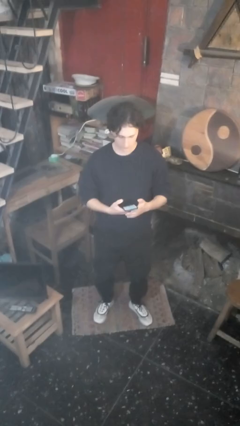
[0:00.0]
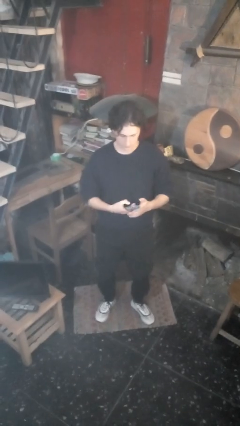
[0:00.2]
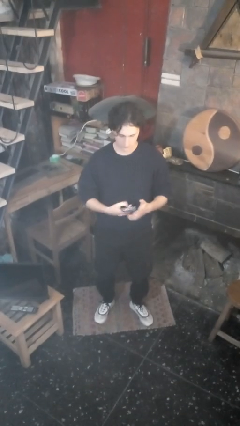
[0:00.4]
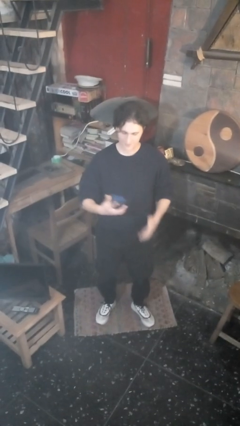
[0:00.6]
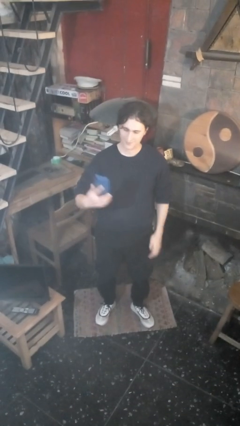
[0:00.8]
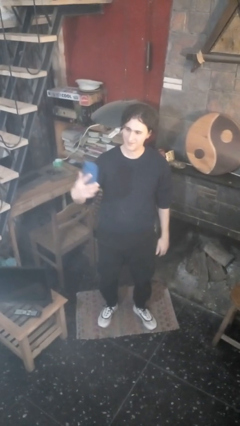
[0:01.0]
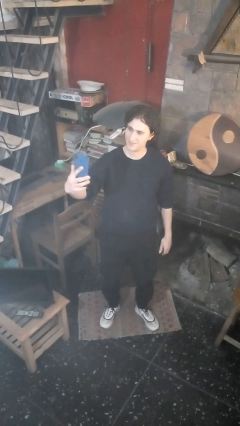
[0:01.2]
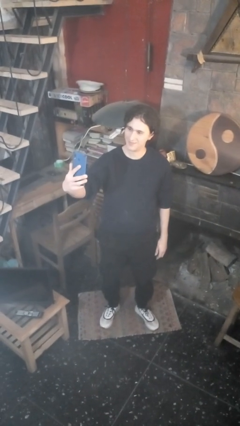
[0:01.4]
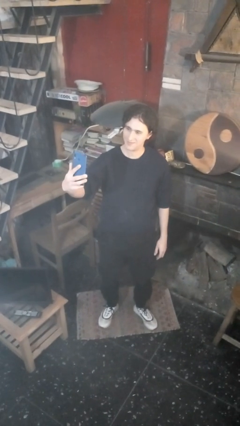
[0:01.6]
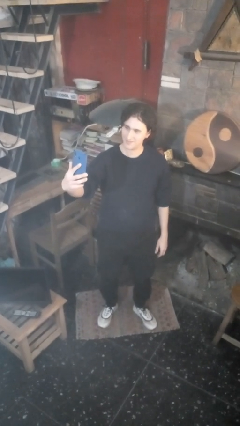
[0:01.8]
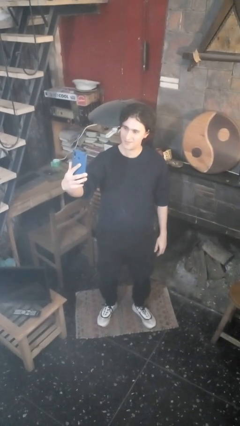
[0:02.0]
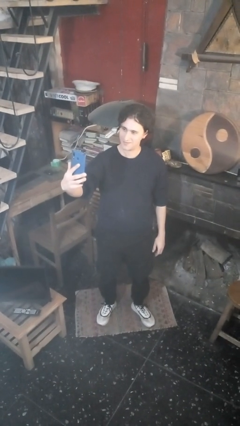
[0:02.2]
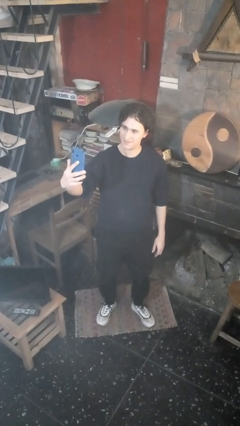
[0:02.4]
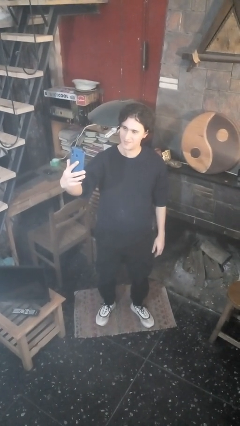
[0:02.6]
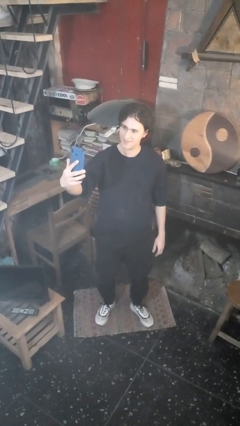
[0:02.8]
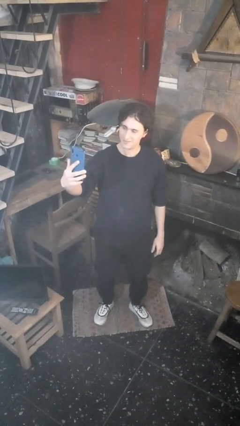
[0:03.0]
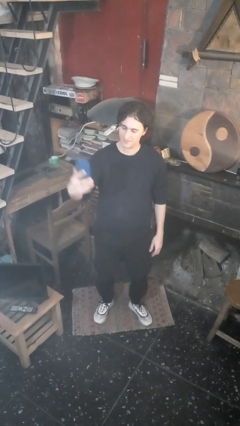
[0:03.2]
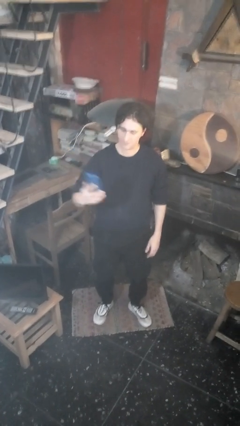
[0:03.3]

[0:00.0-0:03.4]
person takes selfie

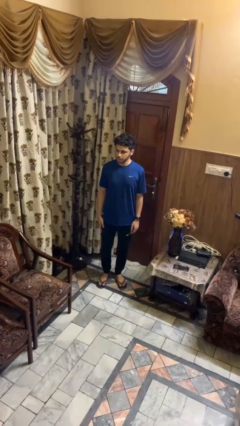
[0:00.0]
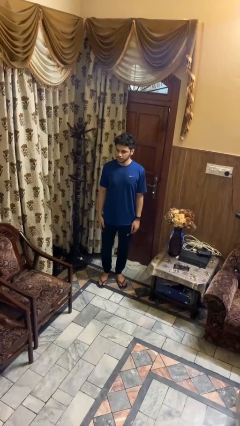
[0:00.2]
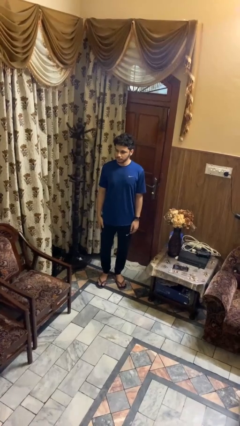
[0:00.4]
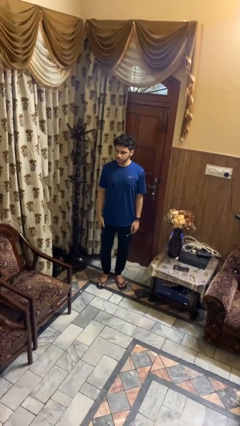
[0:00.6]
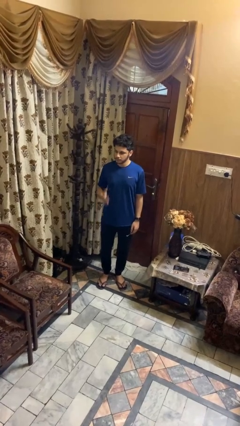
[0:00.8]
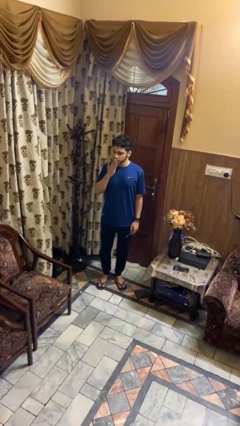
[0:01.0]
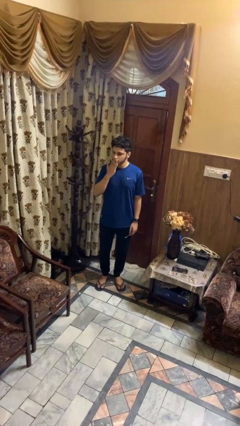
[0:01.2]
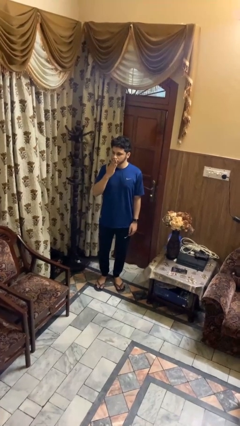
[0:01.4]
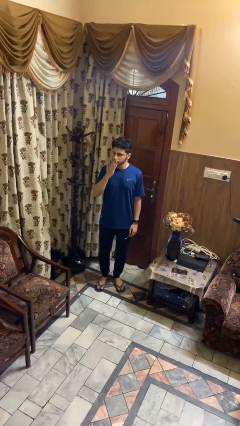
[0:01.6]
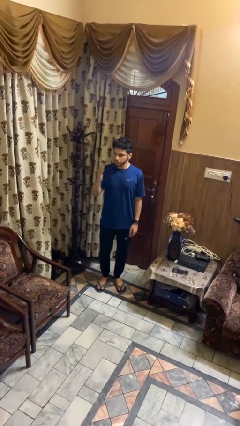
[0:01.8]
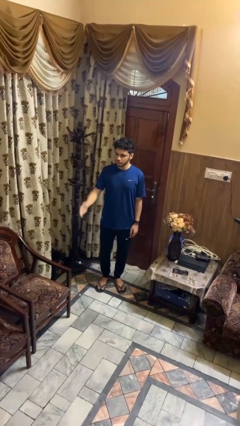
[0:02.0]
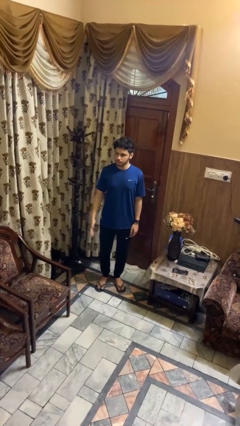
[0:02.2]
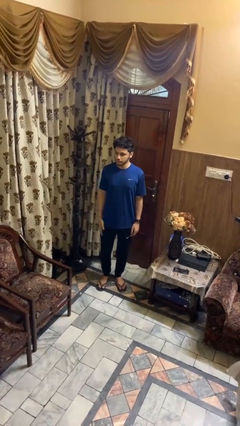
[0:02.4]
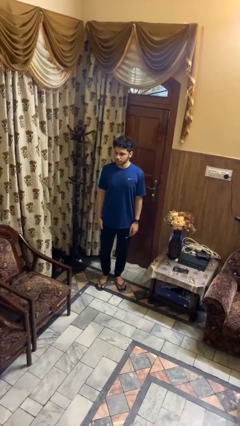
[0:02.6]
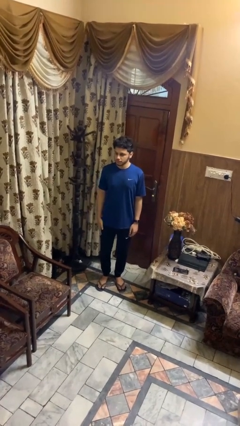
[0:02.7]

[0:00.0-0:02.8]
person gestures blow kiss

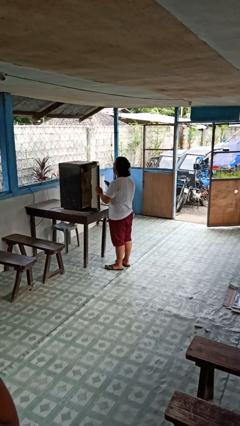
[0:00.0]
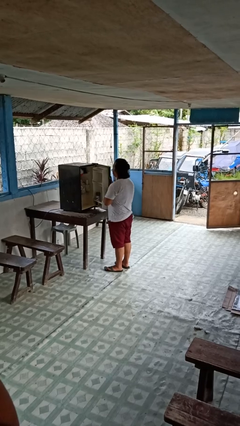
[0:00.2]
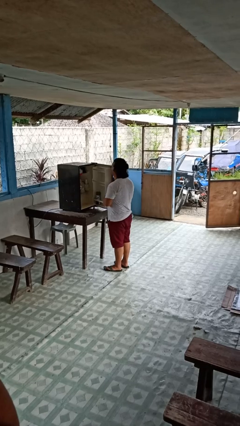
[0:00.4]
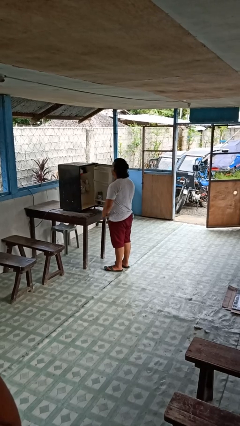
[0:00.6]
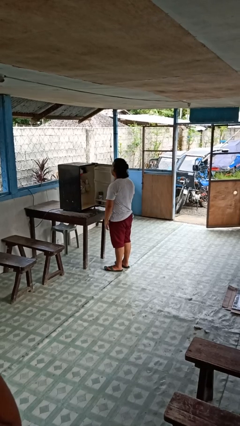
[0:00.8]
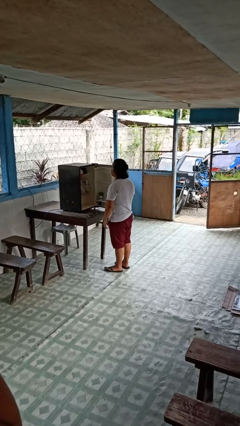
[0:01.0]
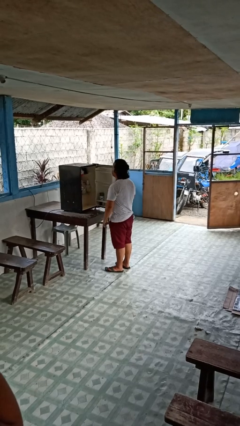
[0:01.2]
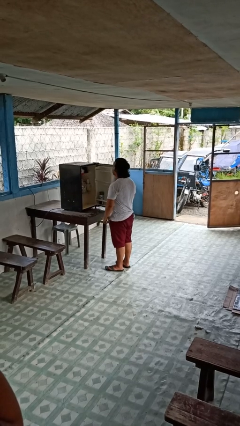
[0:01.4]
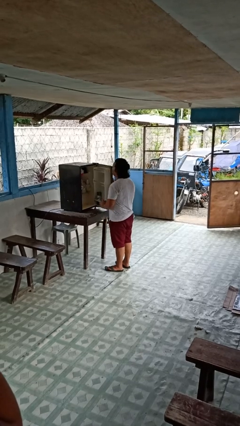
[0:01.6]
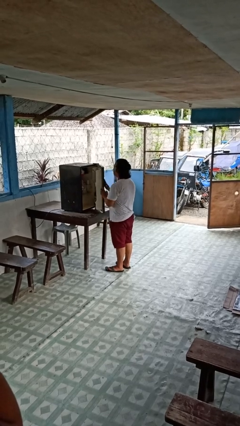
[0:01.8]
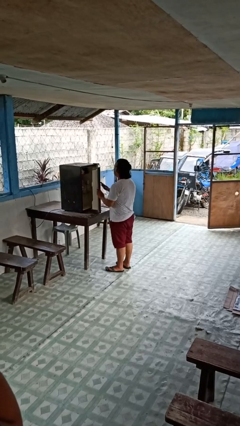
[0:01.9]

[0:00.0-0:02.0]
person opens refrigerator

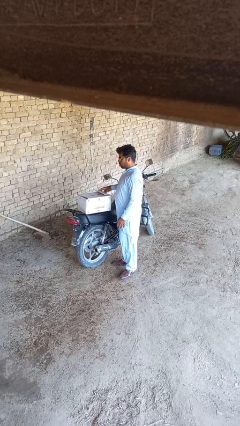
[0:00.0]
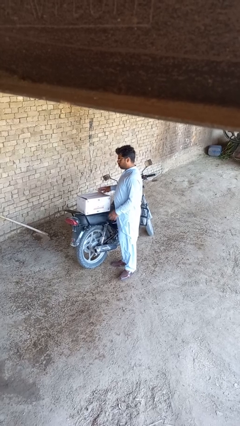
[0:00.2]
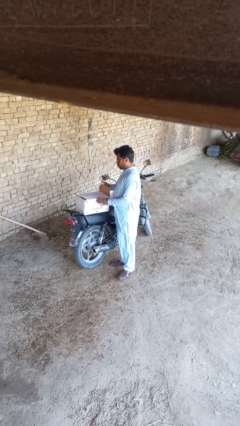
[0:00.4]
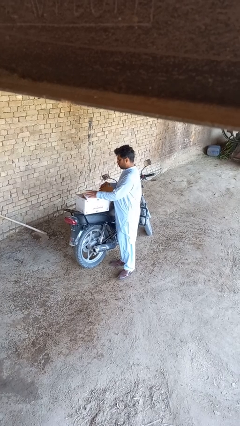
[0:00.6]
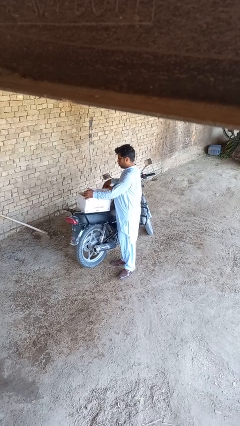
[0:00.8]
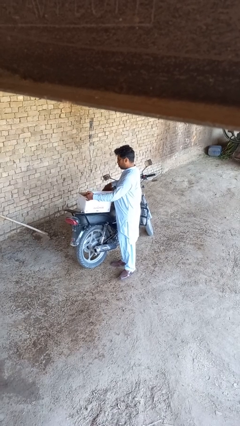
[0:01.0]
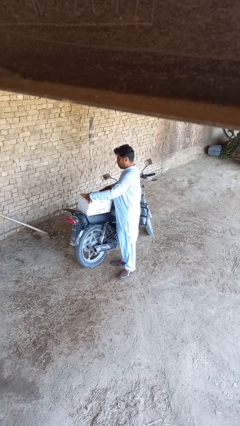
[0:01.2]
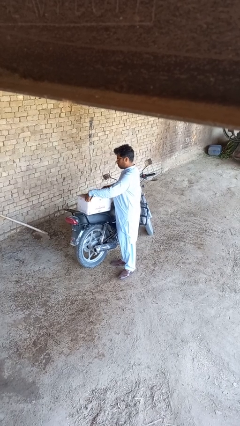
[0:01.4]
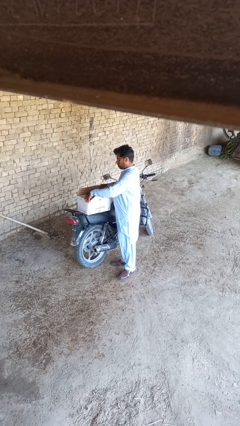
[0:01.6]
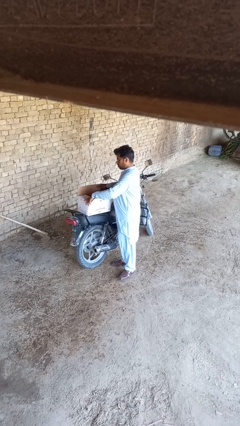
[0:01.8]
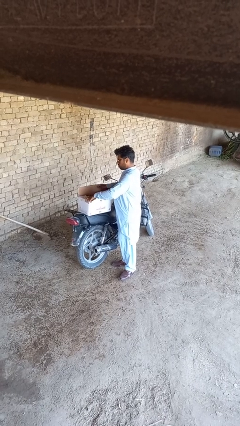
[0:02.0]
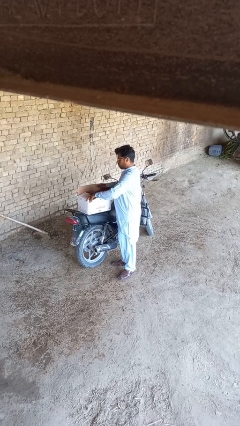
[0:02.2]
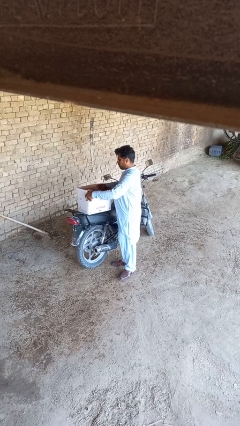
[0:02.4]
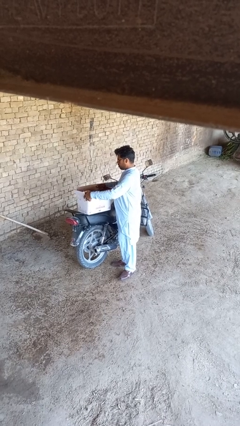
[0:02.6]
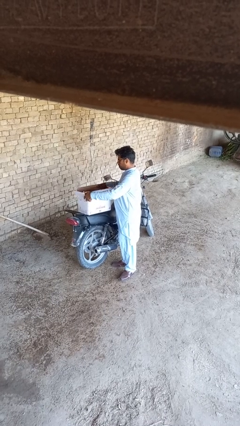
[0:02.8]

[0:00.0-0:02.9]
person opens box

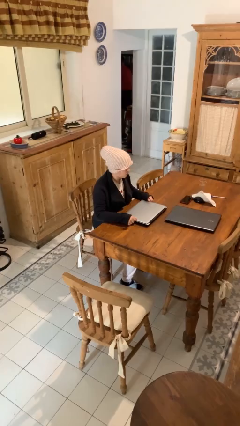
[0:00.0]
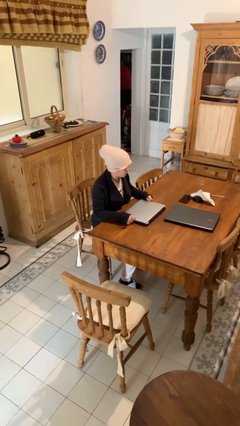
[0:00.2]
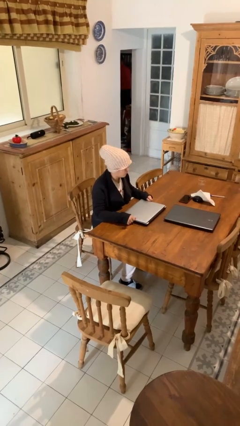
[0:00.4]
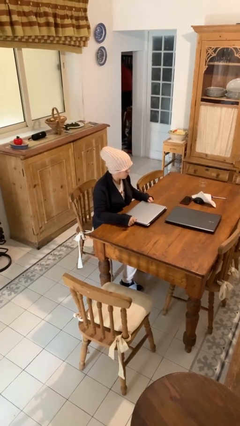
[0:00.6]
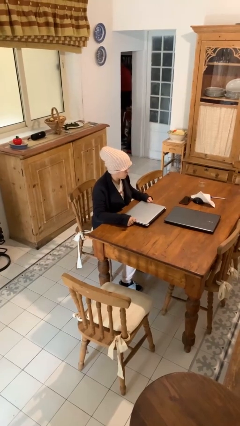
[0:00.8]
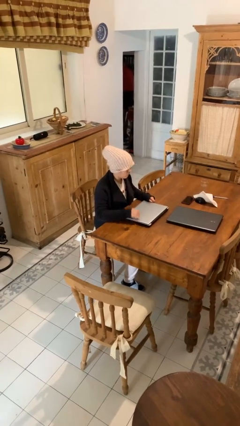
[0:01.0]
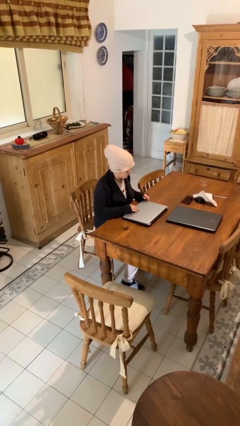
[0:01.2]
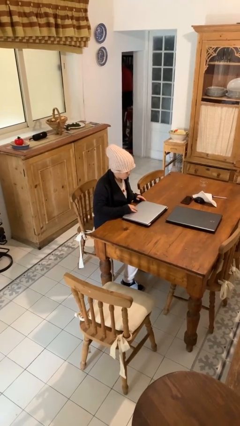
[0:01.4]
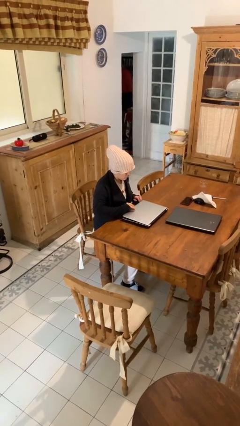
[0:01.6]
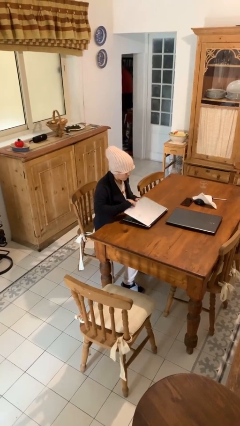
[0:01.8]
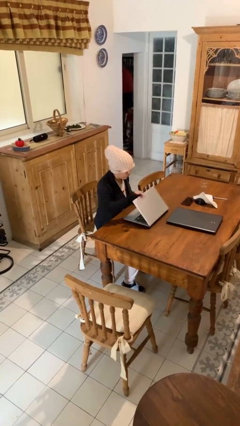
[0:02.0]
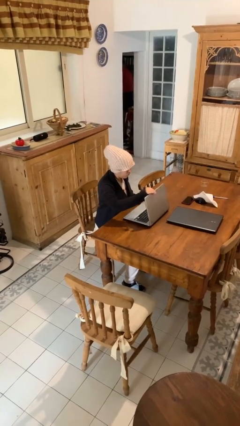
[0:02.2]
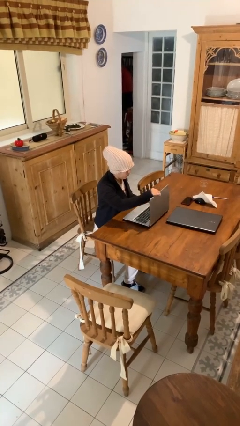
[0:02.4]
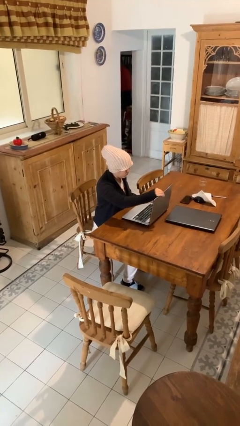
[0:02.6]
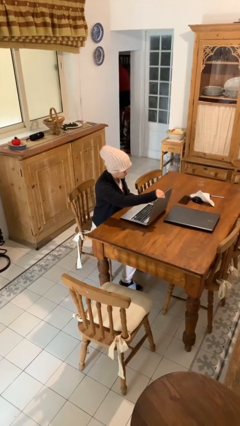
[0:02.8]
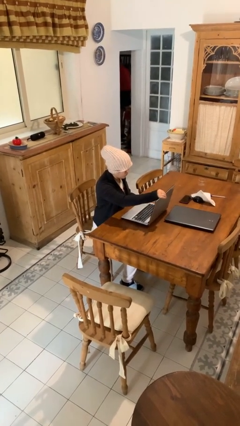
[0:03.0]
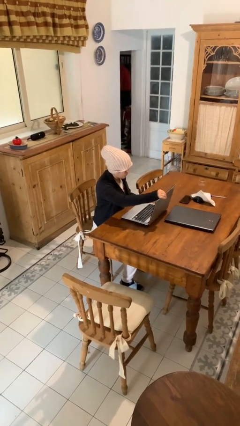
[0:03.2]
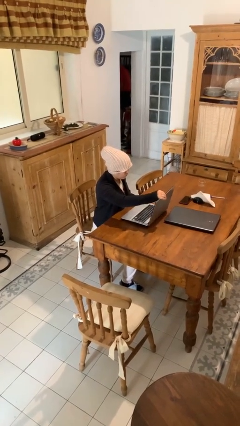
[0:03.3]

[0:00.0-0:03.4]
person opens laptop

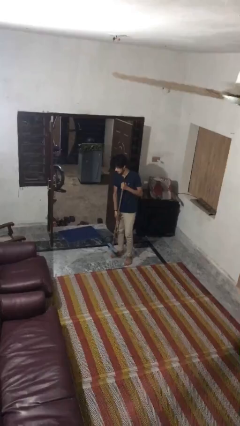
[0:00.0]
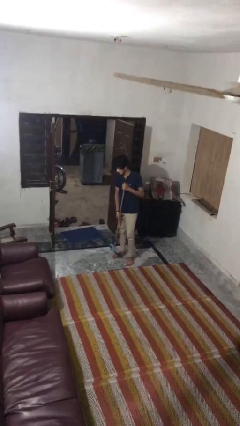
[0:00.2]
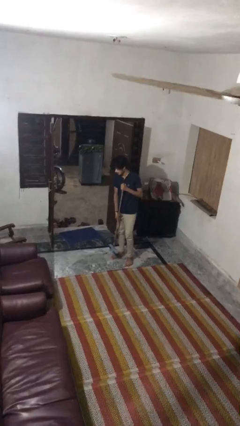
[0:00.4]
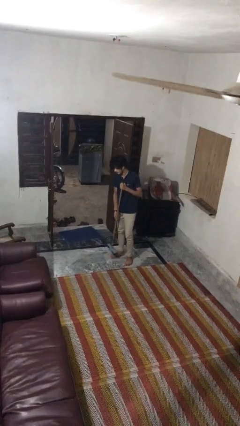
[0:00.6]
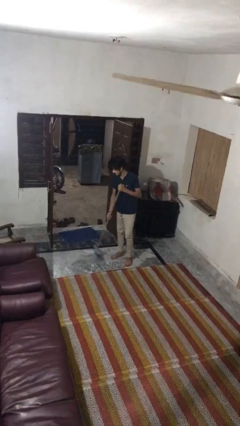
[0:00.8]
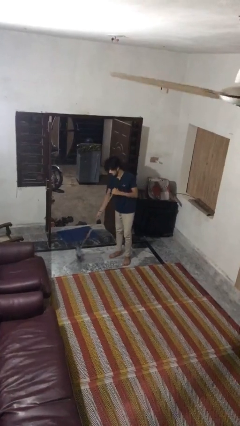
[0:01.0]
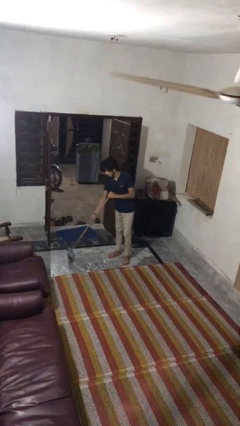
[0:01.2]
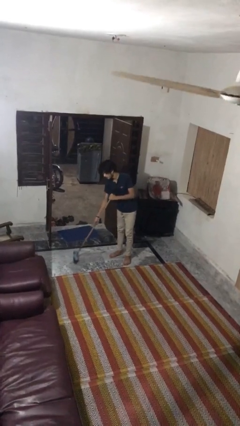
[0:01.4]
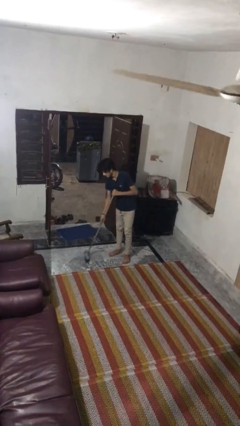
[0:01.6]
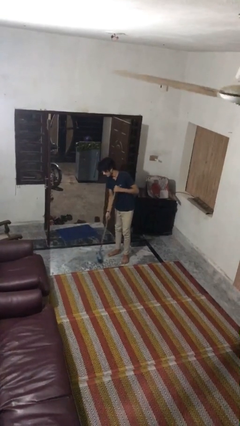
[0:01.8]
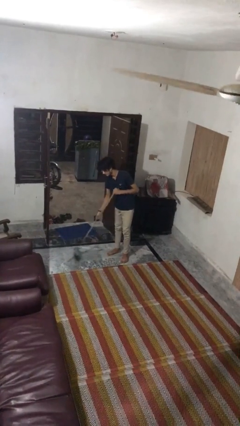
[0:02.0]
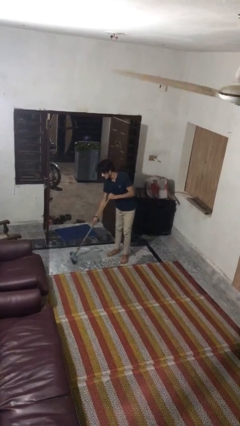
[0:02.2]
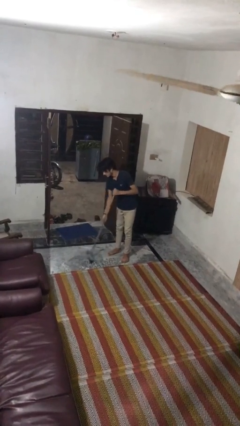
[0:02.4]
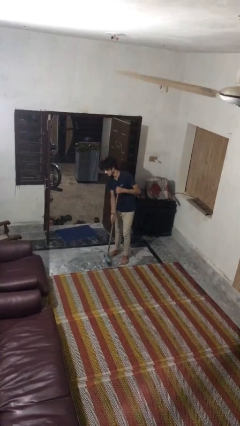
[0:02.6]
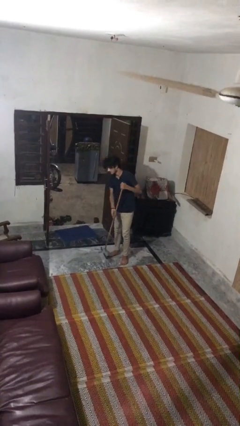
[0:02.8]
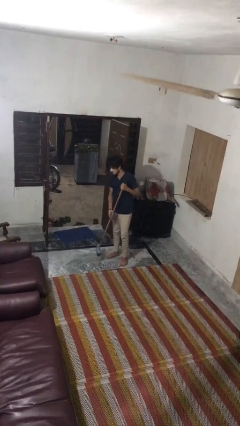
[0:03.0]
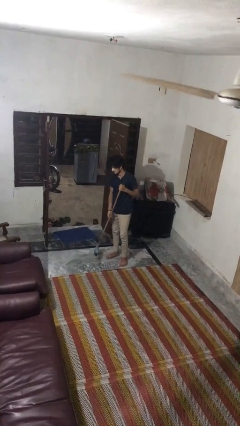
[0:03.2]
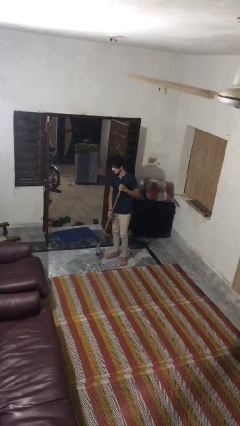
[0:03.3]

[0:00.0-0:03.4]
person sweeps floor
